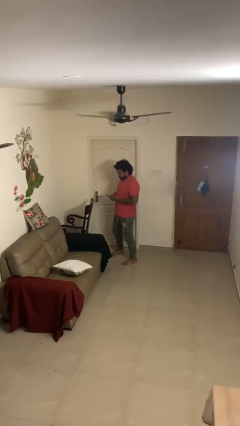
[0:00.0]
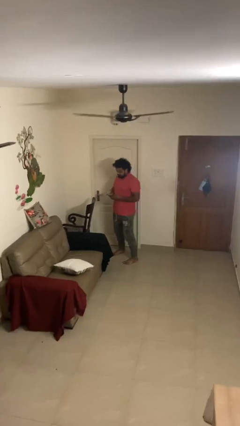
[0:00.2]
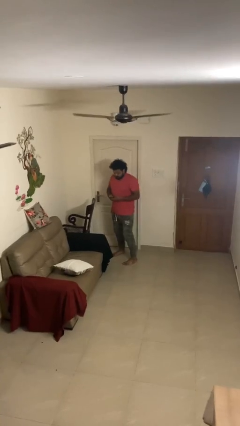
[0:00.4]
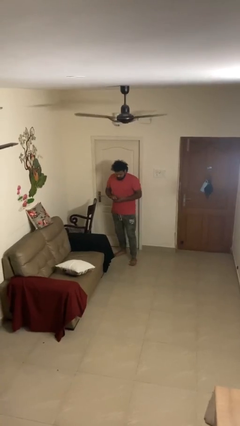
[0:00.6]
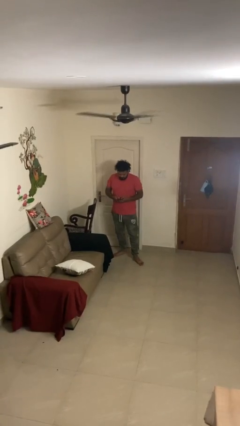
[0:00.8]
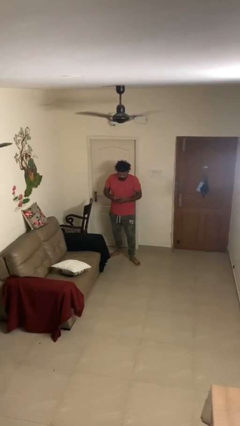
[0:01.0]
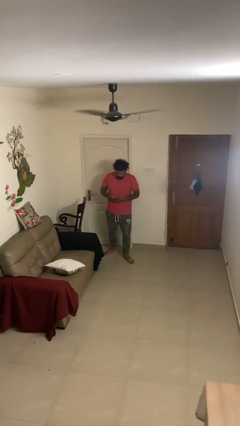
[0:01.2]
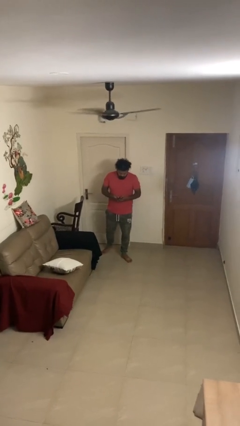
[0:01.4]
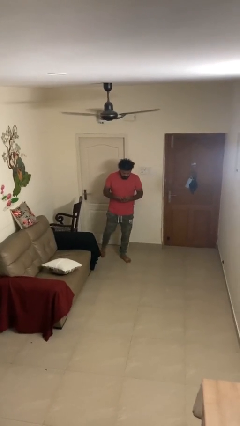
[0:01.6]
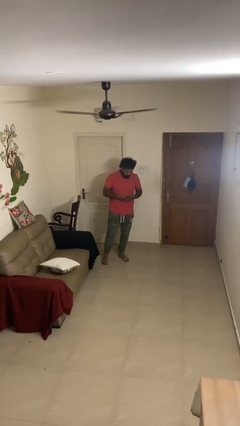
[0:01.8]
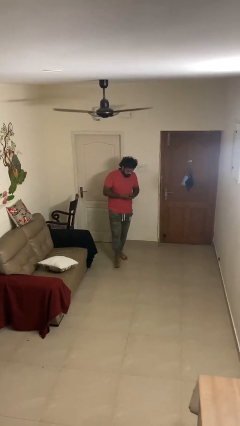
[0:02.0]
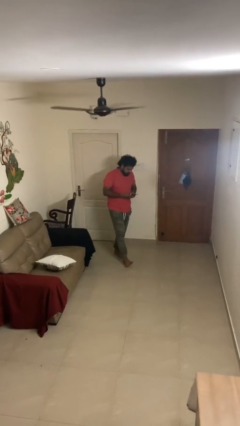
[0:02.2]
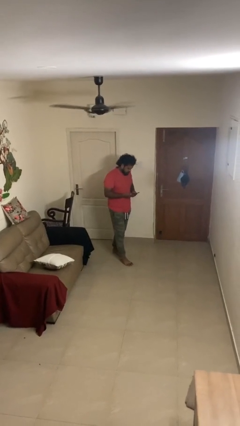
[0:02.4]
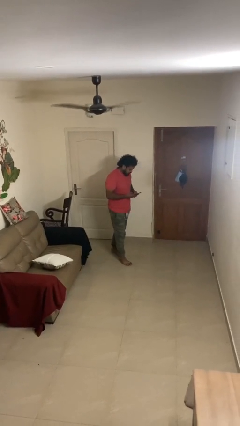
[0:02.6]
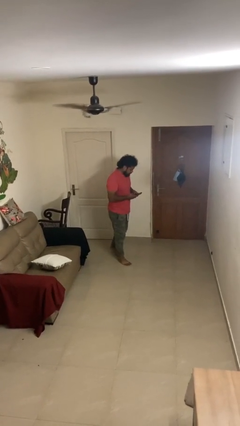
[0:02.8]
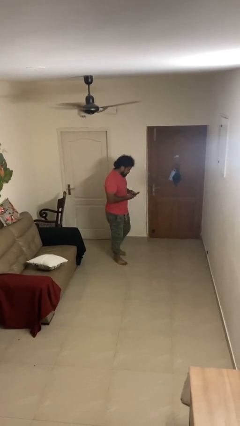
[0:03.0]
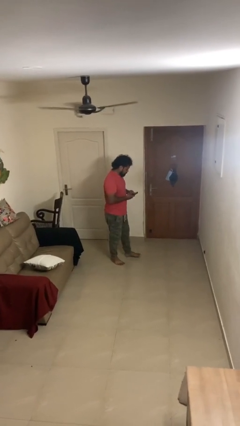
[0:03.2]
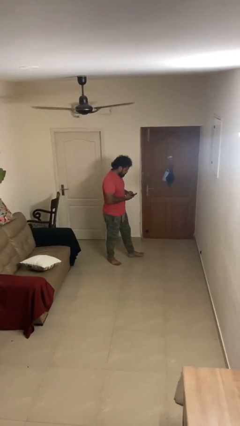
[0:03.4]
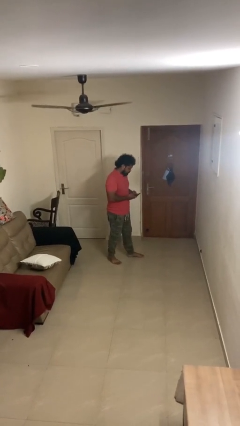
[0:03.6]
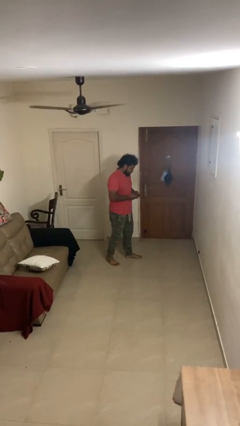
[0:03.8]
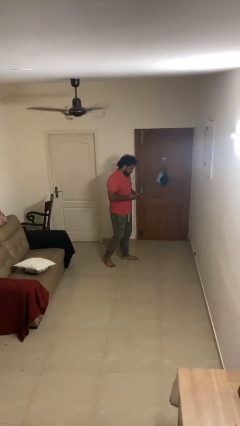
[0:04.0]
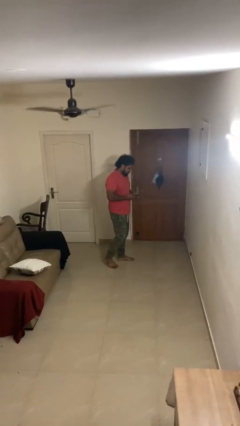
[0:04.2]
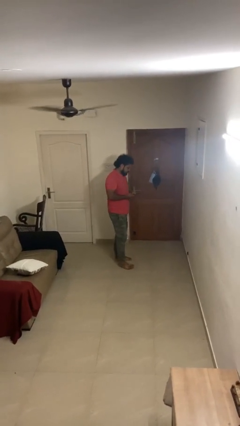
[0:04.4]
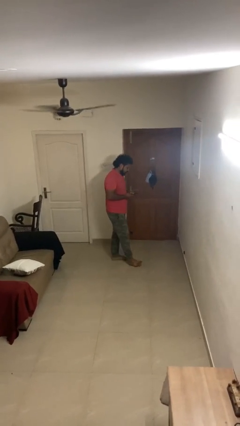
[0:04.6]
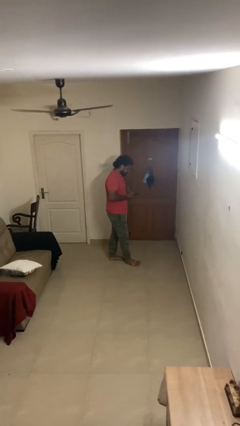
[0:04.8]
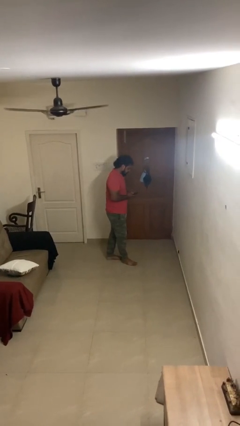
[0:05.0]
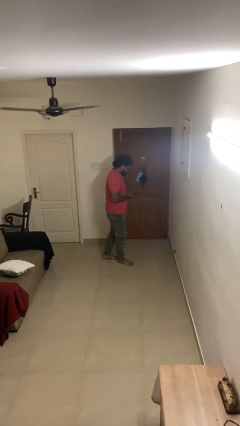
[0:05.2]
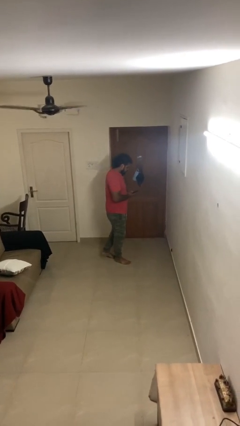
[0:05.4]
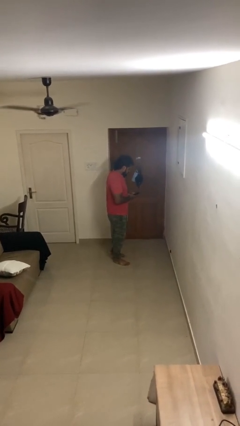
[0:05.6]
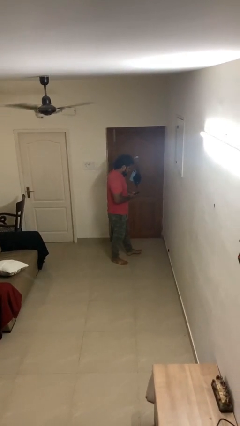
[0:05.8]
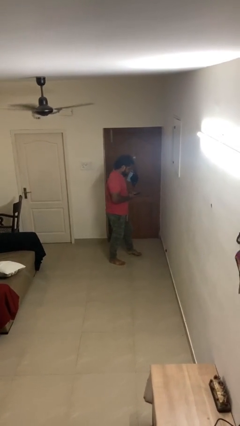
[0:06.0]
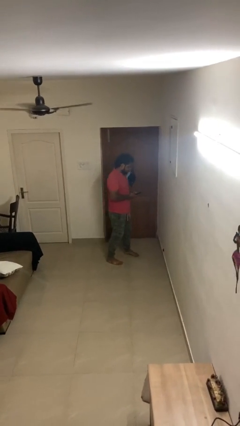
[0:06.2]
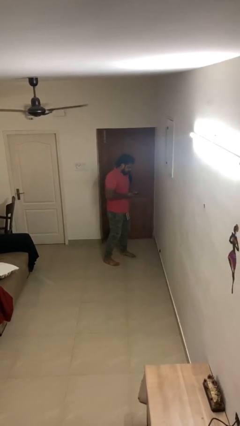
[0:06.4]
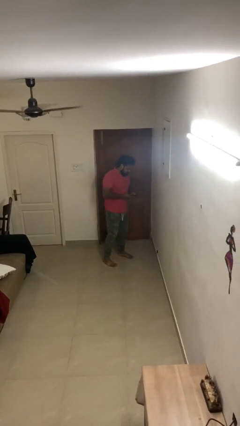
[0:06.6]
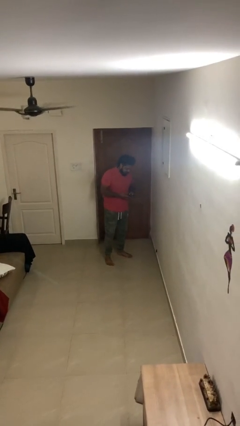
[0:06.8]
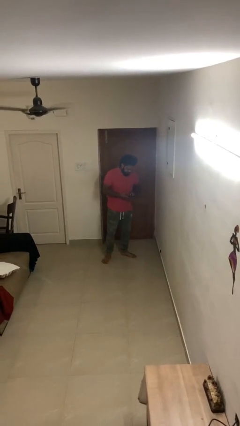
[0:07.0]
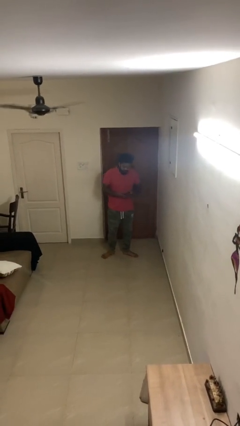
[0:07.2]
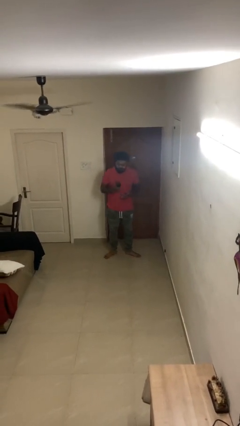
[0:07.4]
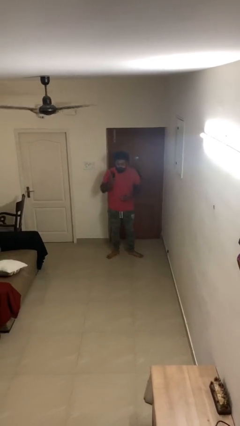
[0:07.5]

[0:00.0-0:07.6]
person texts on phone

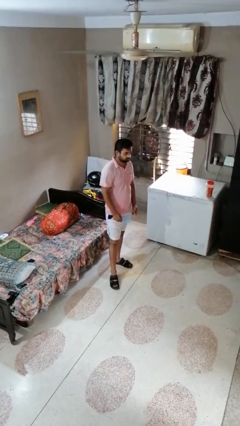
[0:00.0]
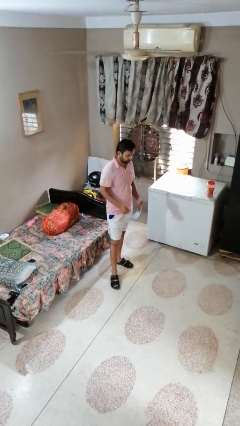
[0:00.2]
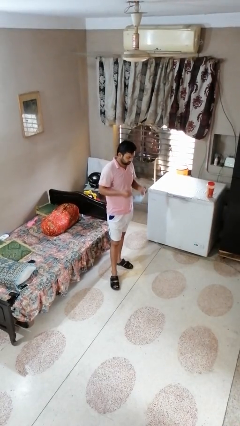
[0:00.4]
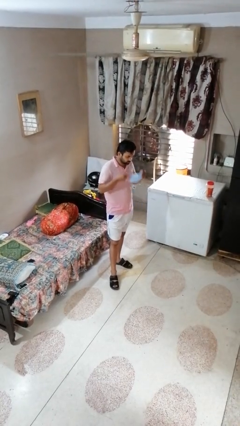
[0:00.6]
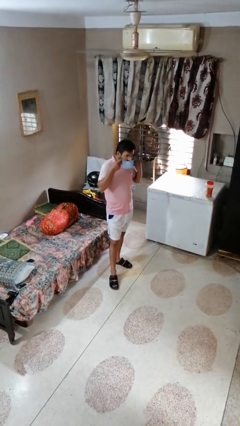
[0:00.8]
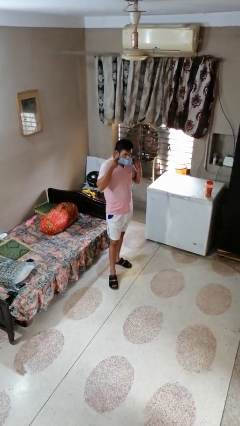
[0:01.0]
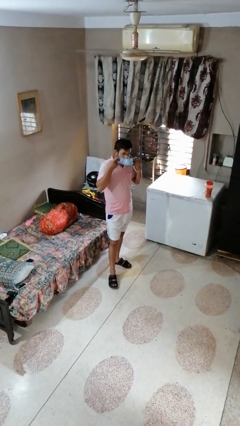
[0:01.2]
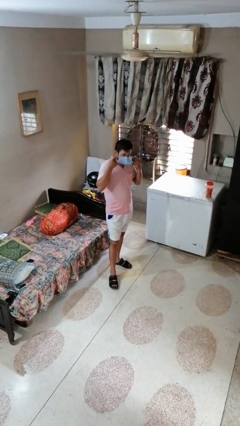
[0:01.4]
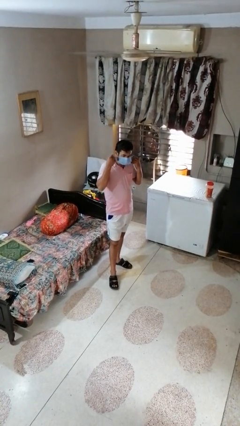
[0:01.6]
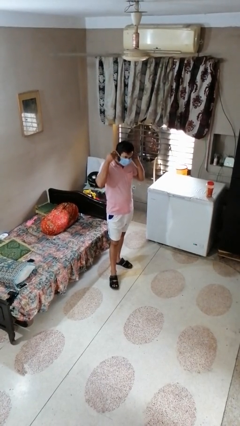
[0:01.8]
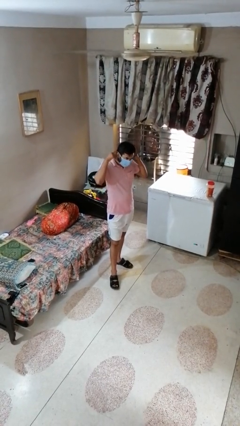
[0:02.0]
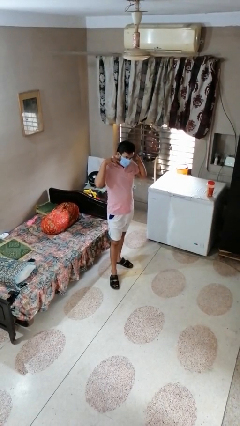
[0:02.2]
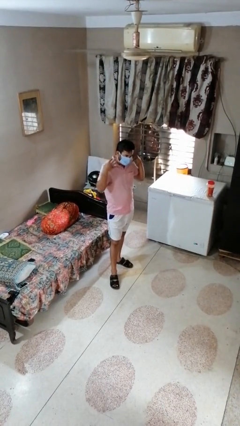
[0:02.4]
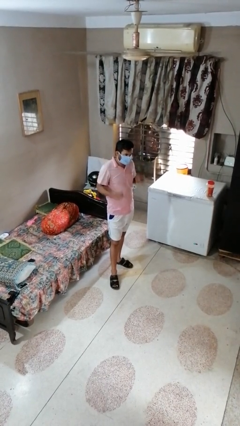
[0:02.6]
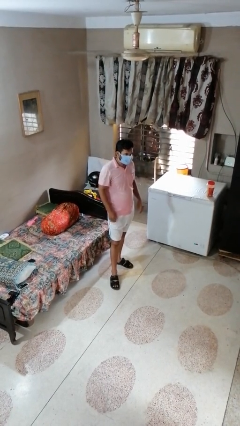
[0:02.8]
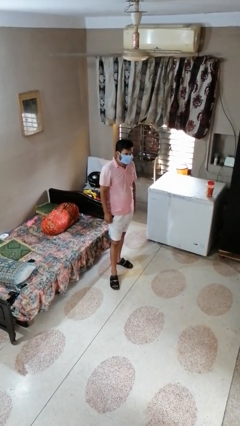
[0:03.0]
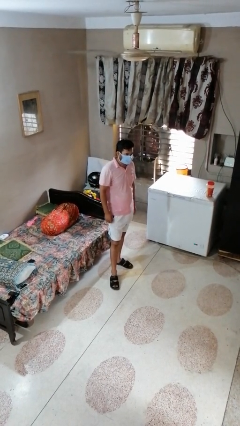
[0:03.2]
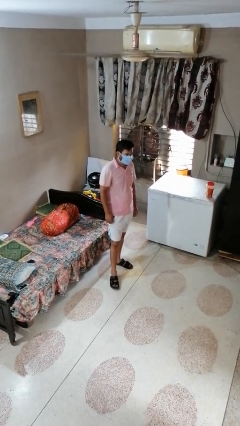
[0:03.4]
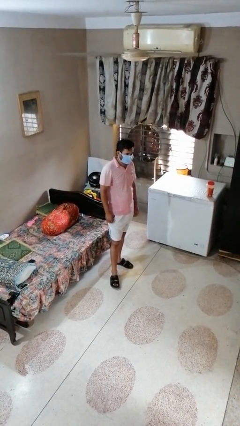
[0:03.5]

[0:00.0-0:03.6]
person puts on facemask

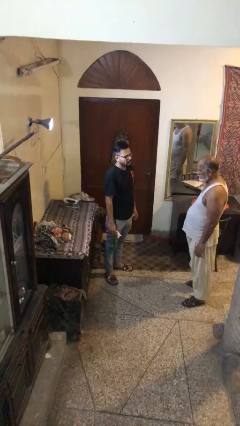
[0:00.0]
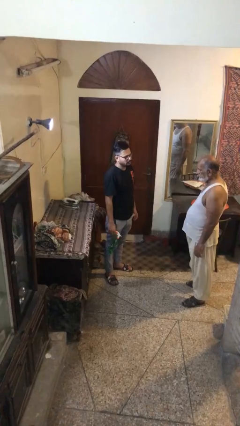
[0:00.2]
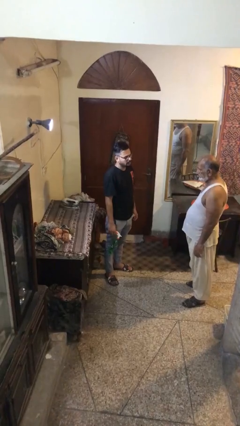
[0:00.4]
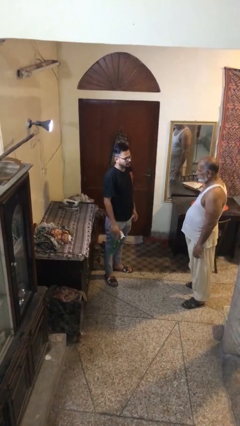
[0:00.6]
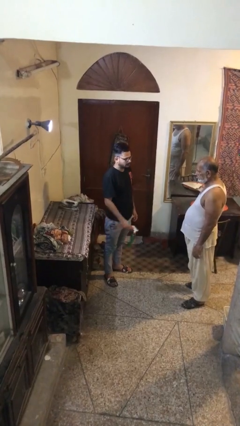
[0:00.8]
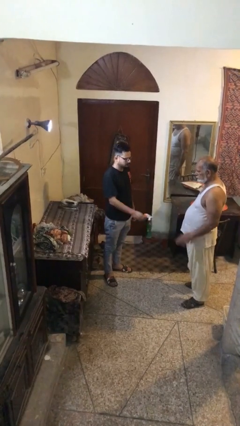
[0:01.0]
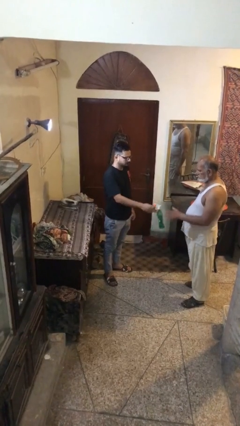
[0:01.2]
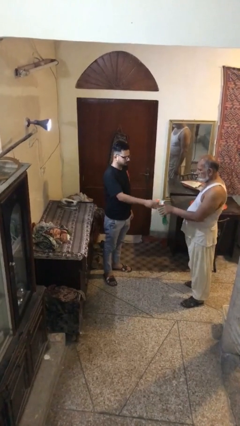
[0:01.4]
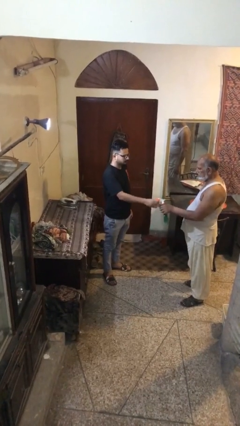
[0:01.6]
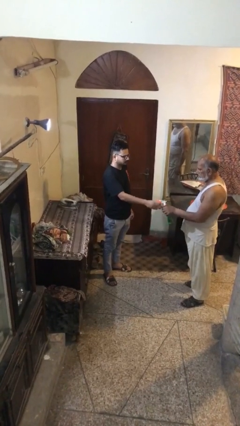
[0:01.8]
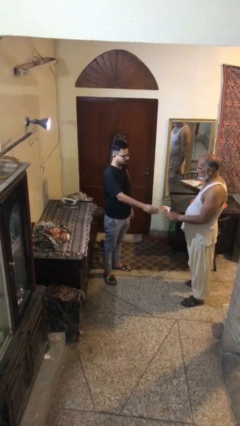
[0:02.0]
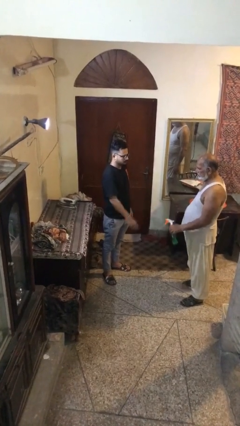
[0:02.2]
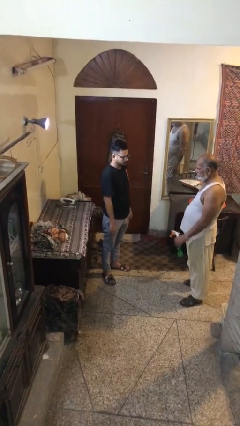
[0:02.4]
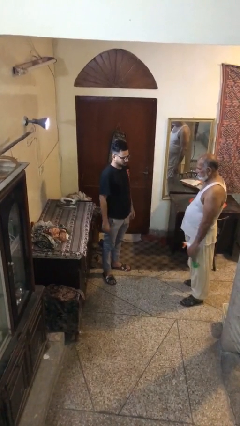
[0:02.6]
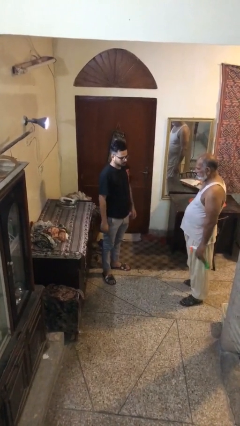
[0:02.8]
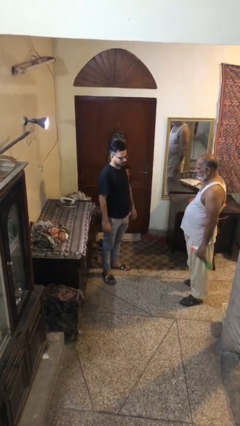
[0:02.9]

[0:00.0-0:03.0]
person transfers object to person

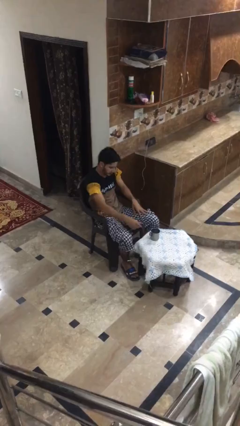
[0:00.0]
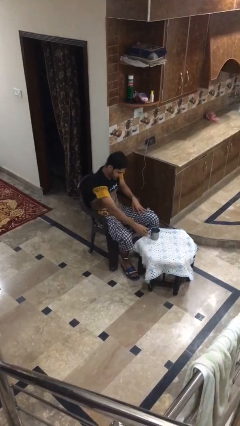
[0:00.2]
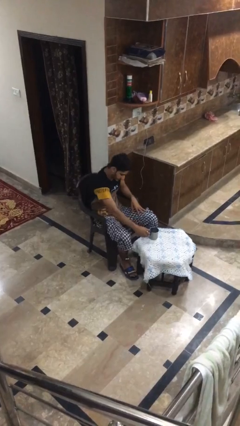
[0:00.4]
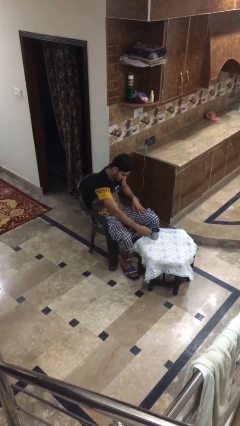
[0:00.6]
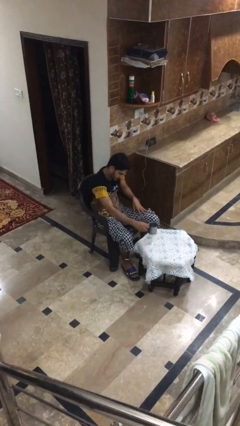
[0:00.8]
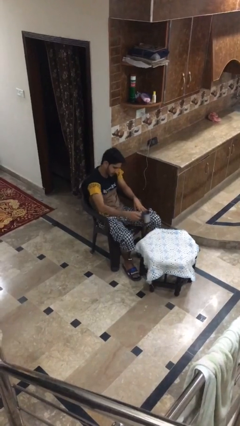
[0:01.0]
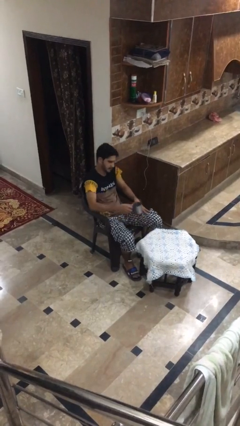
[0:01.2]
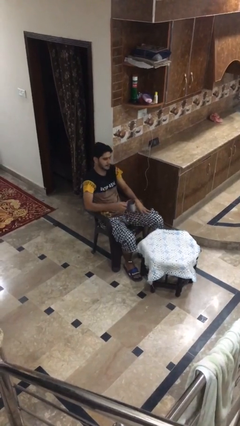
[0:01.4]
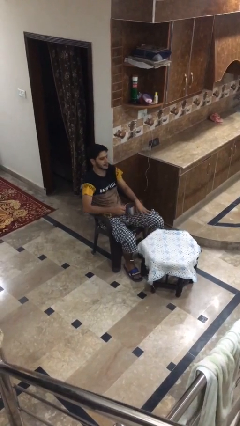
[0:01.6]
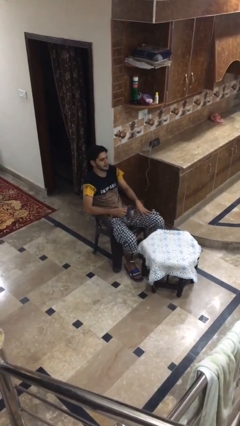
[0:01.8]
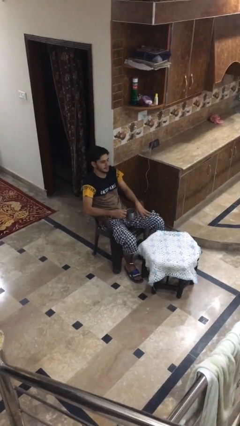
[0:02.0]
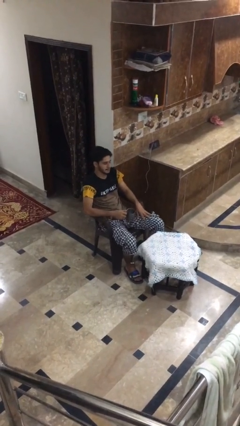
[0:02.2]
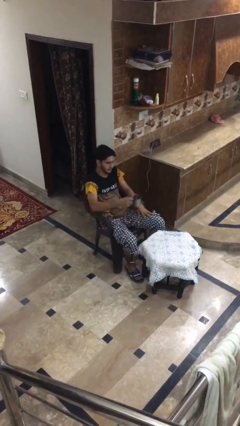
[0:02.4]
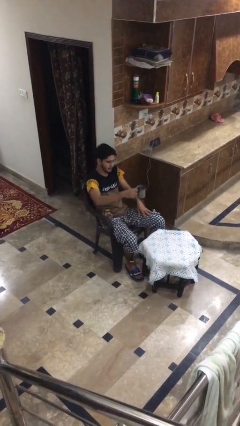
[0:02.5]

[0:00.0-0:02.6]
person picks up object from table

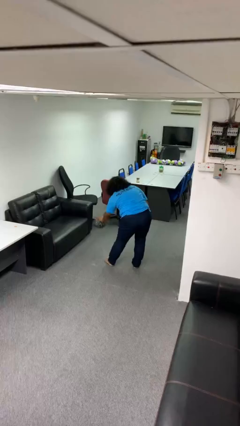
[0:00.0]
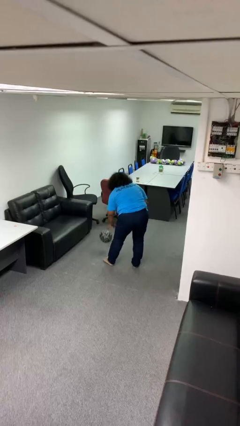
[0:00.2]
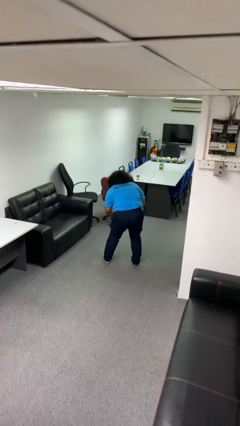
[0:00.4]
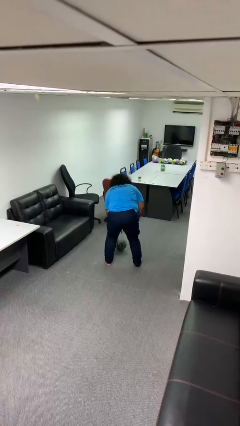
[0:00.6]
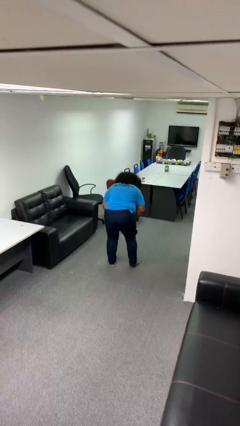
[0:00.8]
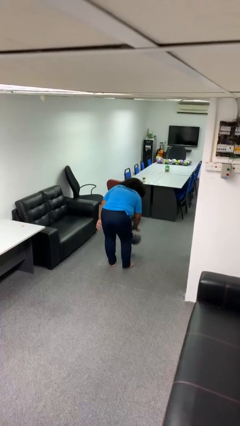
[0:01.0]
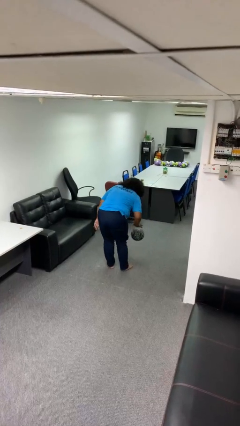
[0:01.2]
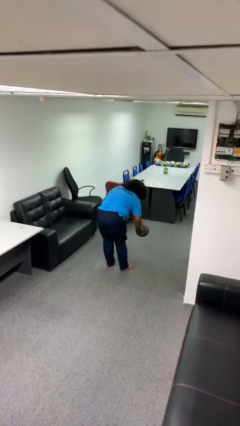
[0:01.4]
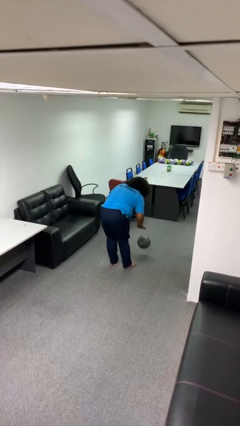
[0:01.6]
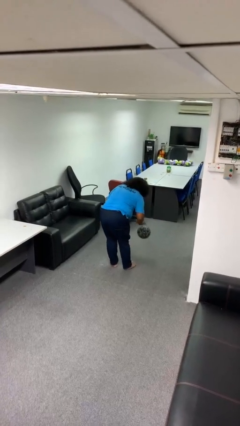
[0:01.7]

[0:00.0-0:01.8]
person bounces ball on floor
